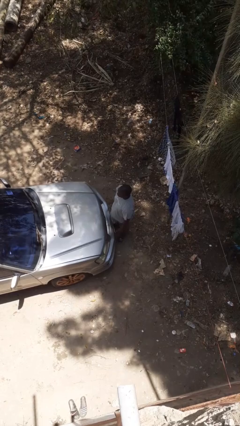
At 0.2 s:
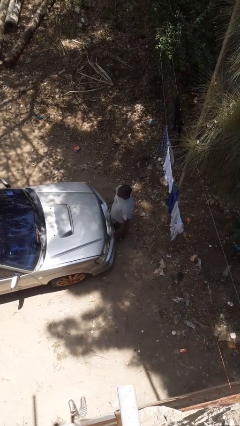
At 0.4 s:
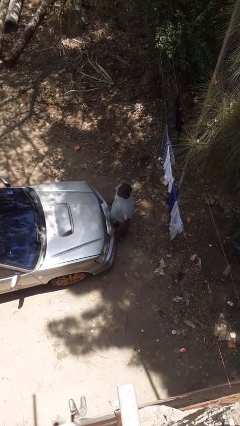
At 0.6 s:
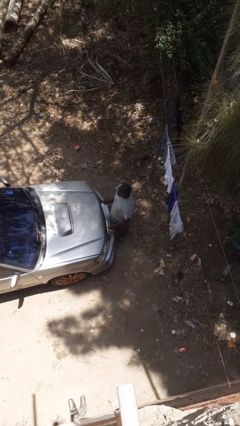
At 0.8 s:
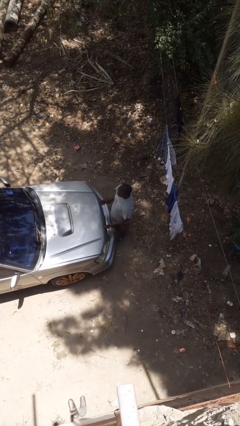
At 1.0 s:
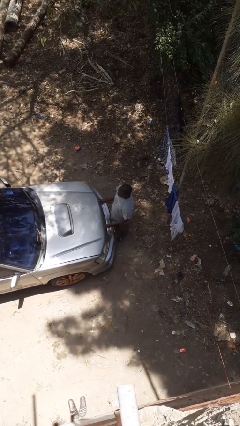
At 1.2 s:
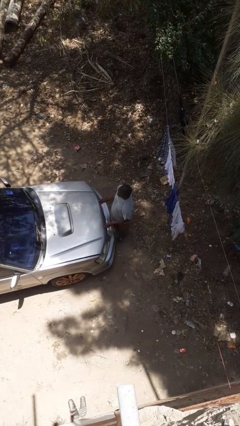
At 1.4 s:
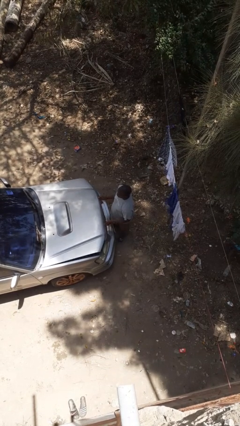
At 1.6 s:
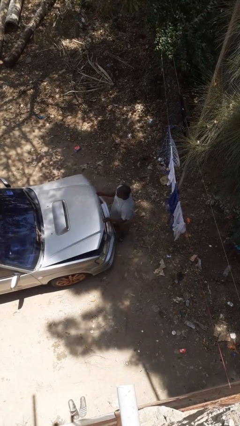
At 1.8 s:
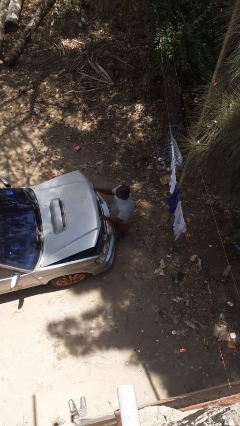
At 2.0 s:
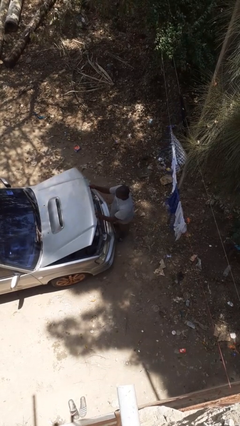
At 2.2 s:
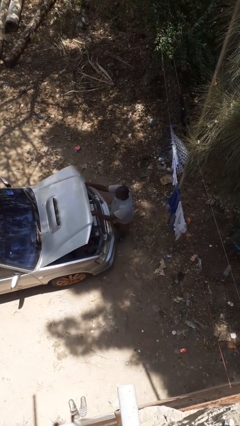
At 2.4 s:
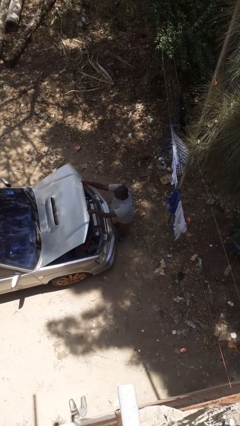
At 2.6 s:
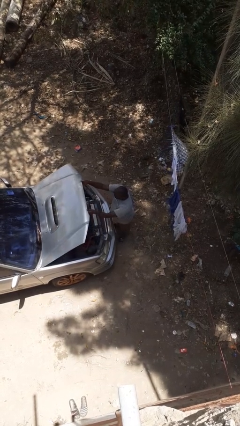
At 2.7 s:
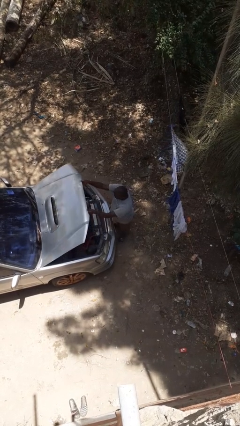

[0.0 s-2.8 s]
person opens car hood

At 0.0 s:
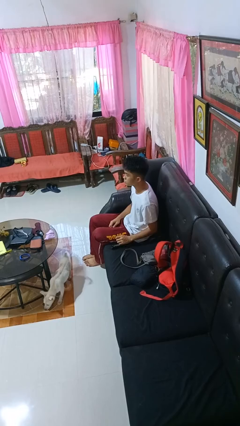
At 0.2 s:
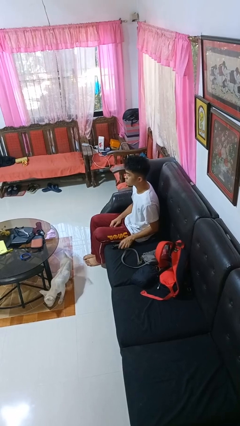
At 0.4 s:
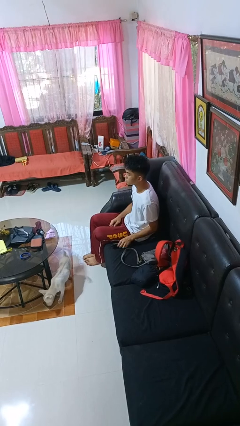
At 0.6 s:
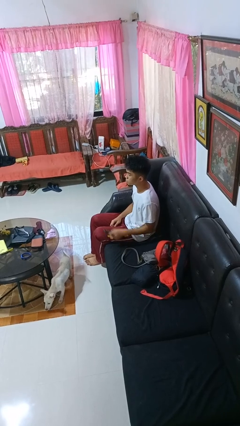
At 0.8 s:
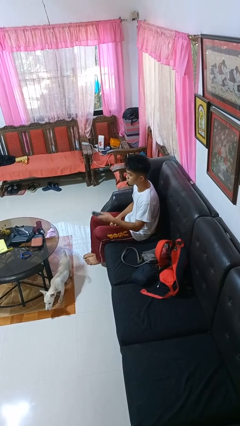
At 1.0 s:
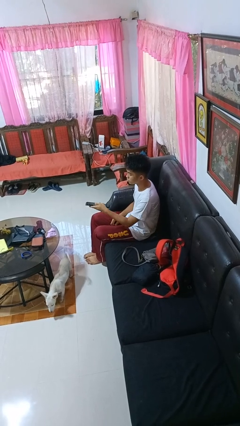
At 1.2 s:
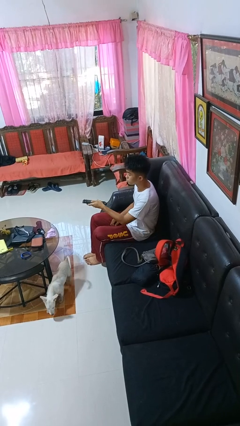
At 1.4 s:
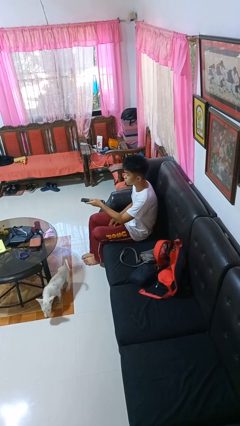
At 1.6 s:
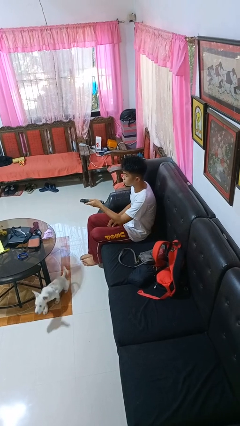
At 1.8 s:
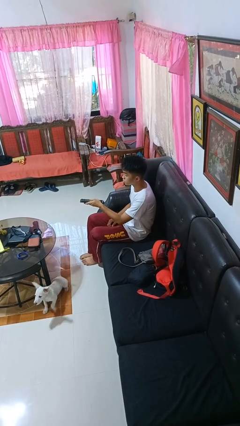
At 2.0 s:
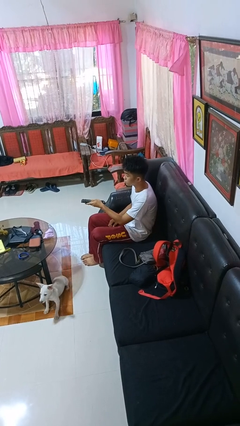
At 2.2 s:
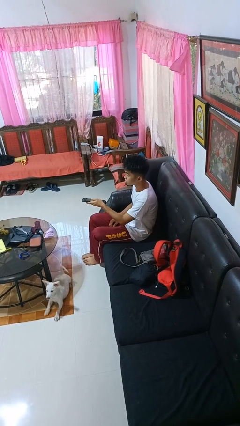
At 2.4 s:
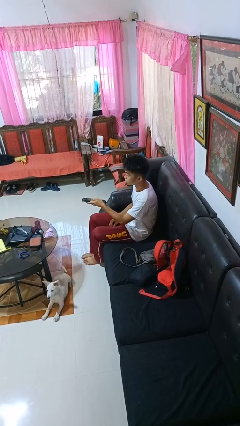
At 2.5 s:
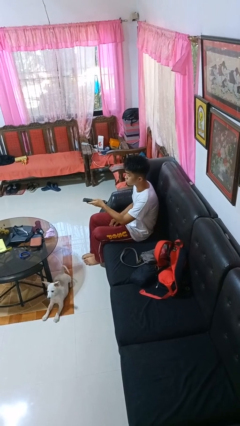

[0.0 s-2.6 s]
person picks up object from shelf

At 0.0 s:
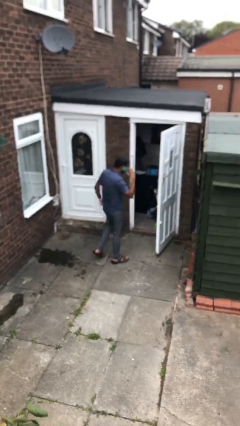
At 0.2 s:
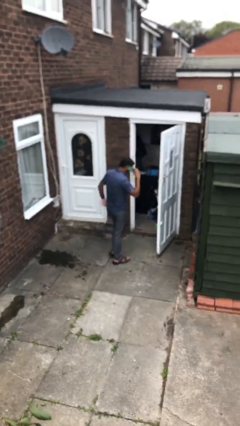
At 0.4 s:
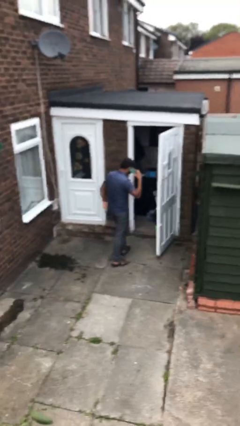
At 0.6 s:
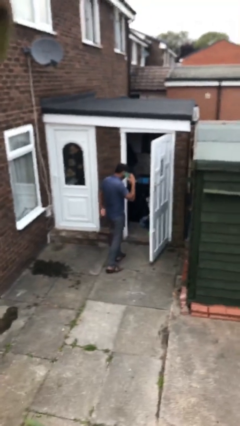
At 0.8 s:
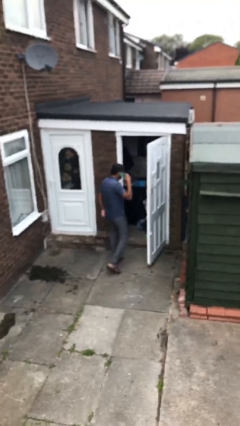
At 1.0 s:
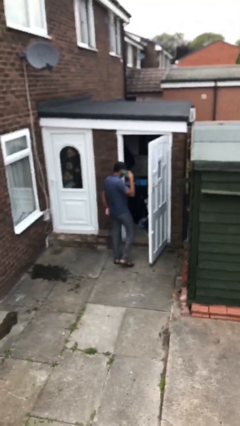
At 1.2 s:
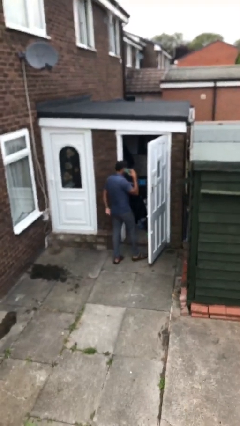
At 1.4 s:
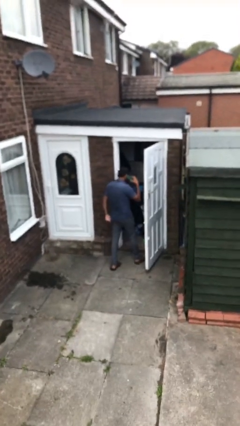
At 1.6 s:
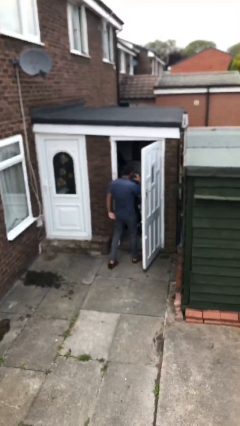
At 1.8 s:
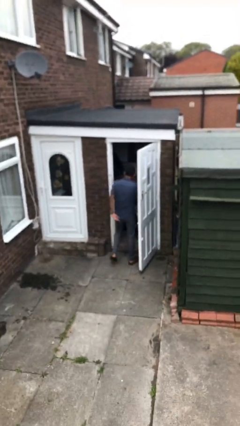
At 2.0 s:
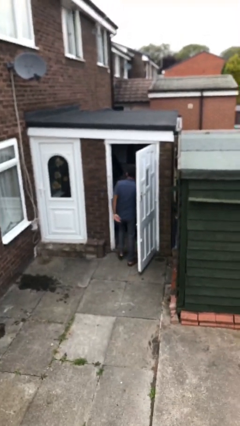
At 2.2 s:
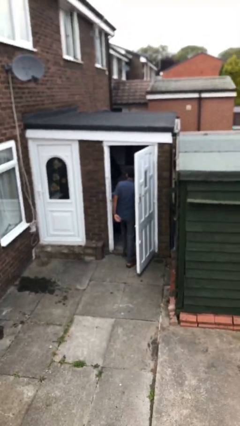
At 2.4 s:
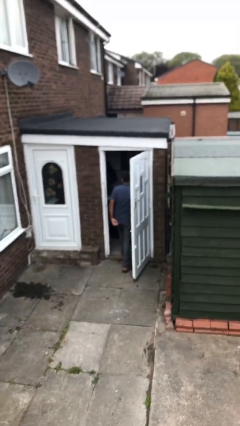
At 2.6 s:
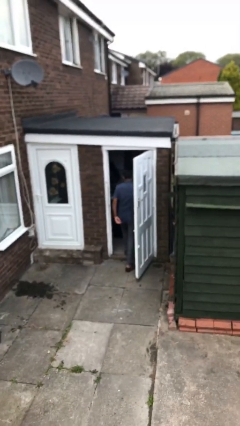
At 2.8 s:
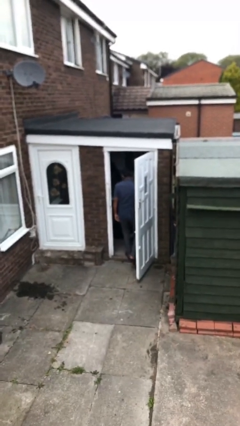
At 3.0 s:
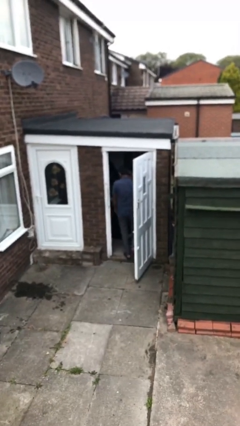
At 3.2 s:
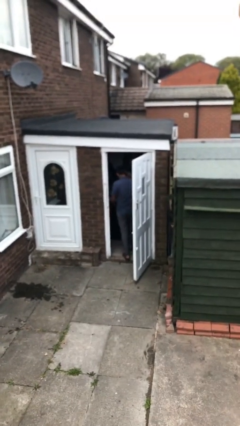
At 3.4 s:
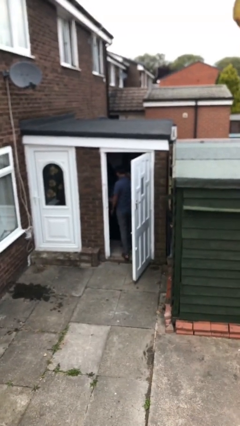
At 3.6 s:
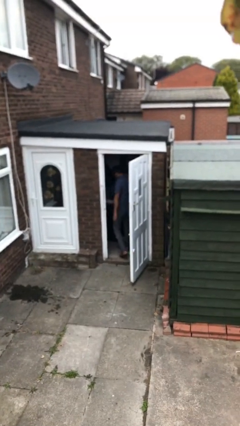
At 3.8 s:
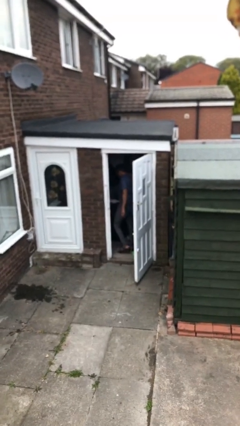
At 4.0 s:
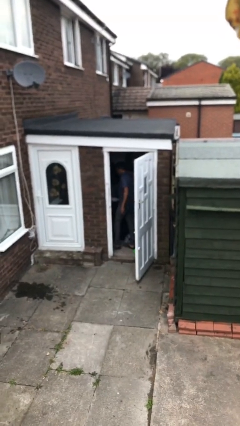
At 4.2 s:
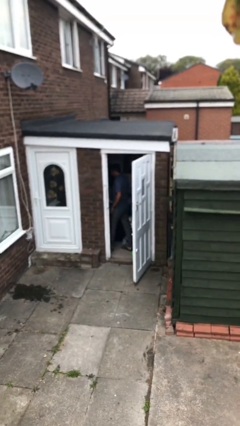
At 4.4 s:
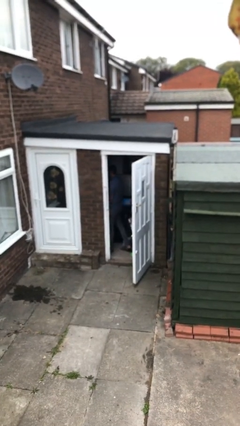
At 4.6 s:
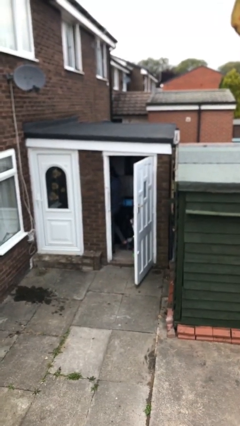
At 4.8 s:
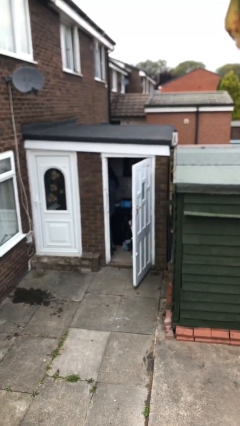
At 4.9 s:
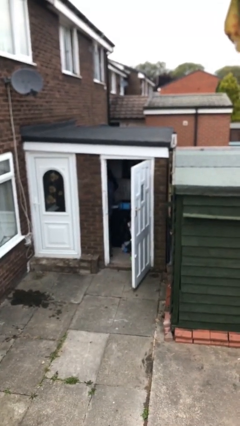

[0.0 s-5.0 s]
person exits scene through structure

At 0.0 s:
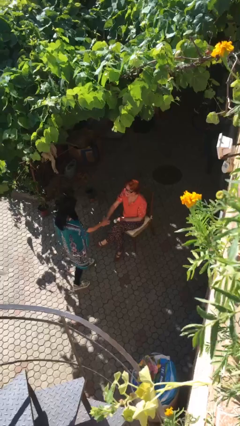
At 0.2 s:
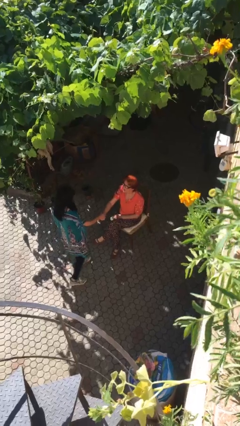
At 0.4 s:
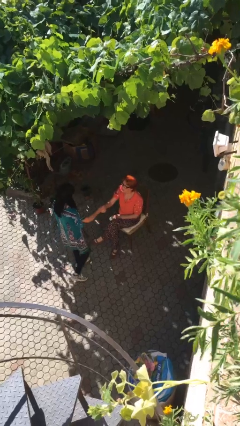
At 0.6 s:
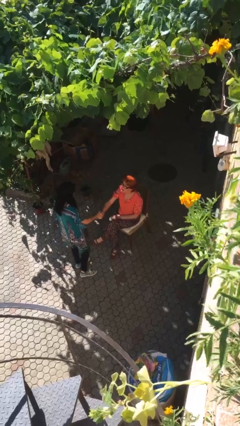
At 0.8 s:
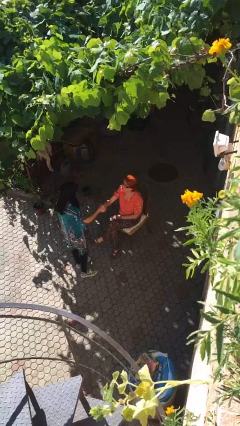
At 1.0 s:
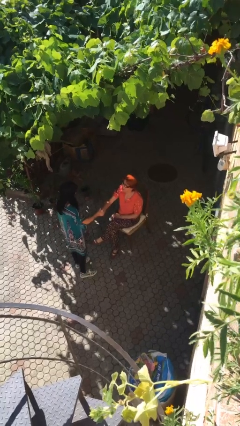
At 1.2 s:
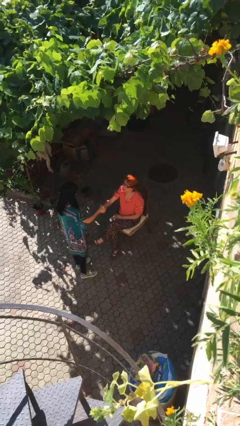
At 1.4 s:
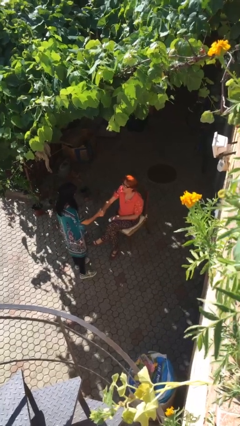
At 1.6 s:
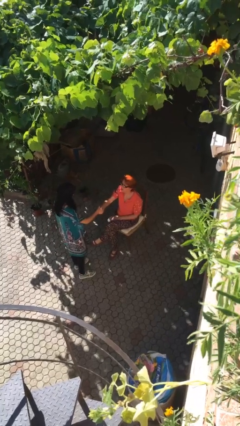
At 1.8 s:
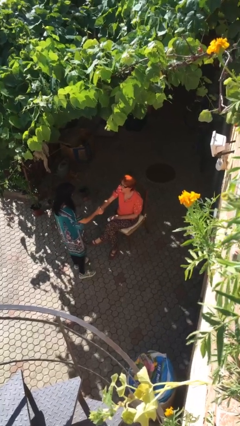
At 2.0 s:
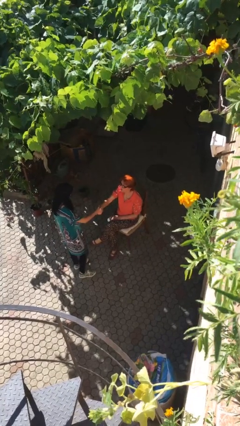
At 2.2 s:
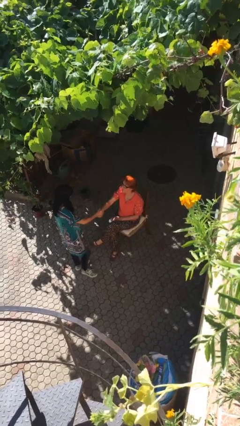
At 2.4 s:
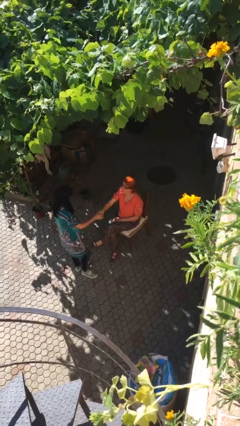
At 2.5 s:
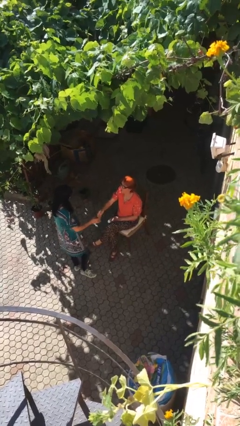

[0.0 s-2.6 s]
person shakes hand

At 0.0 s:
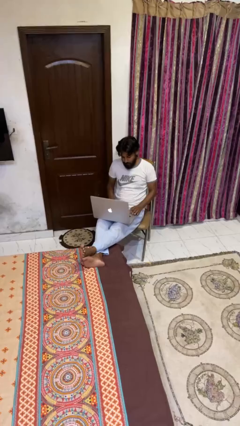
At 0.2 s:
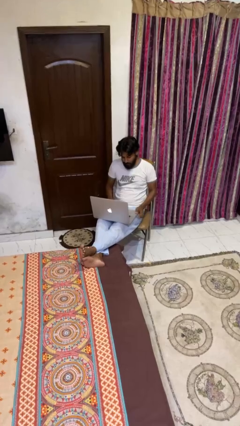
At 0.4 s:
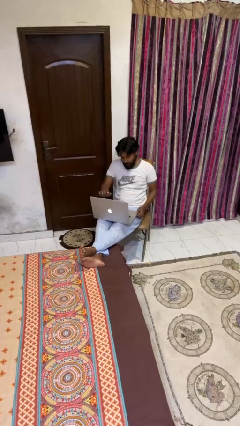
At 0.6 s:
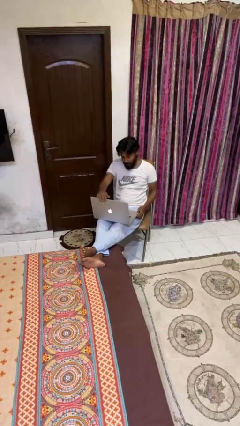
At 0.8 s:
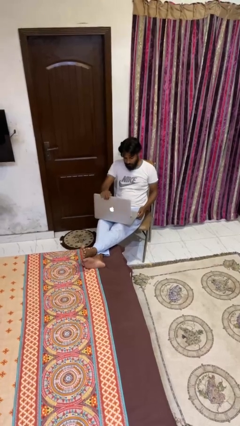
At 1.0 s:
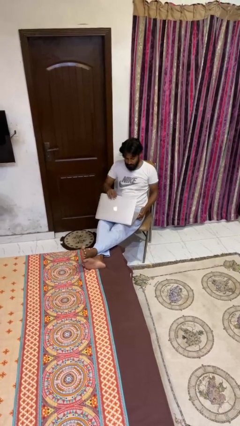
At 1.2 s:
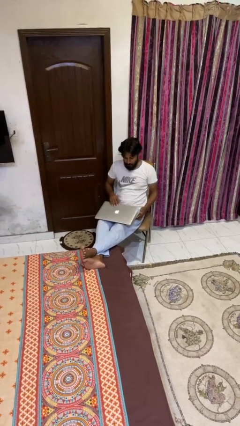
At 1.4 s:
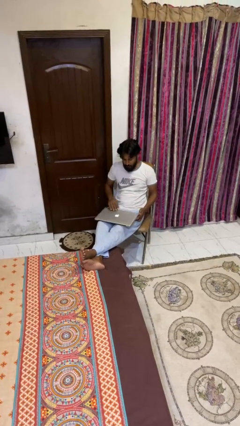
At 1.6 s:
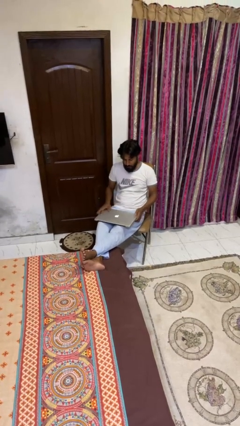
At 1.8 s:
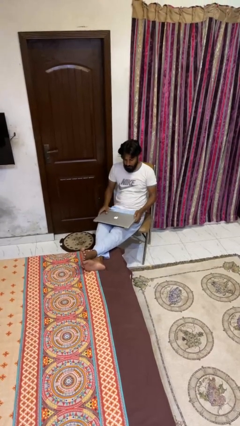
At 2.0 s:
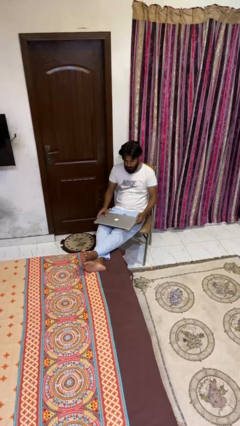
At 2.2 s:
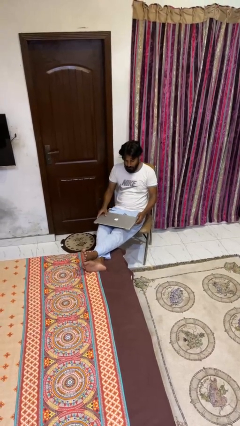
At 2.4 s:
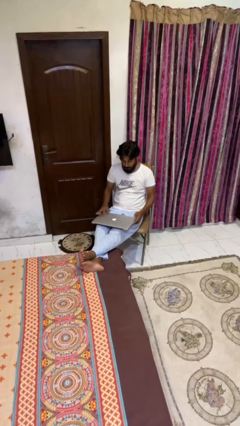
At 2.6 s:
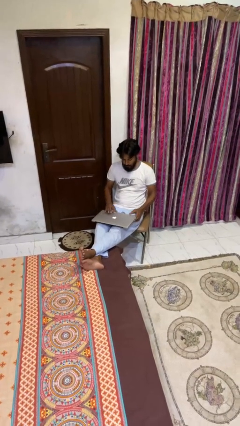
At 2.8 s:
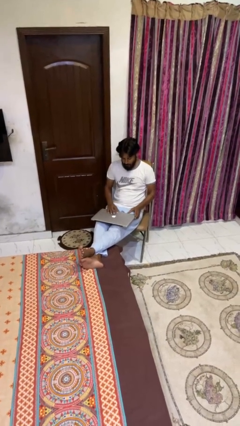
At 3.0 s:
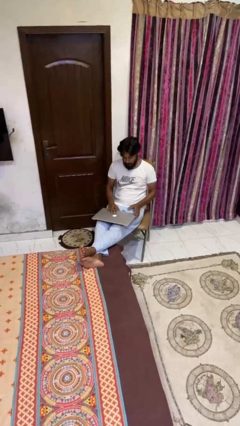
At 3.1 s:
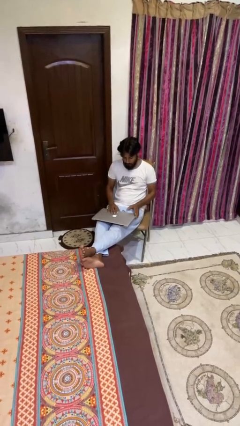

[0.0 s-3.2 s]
person closes laptop

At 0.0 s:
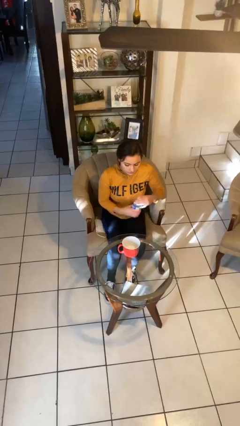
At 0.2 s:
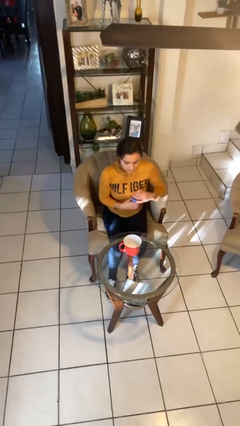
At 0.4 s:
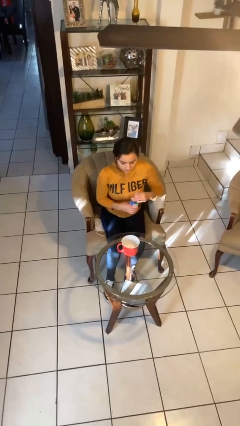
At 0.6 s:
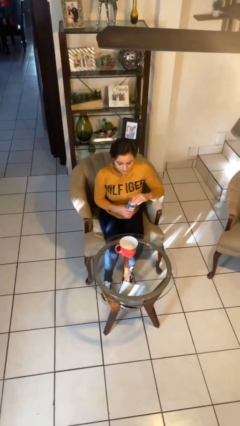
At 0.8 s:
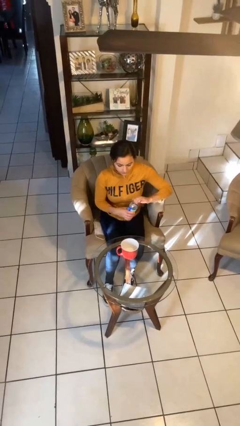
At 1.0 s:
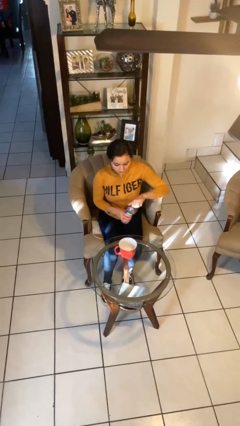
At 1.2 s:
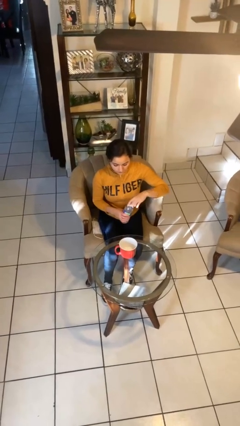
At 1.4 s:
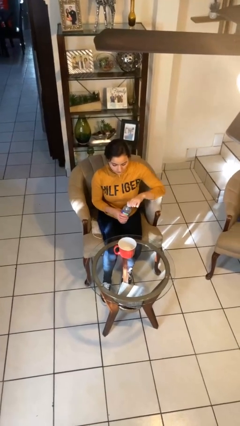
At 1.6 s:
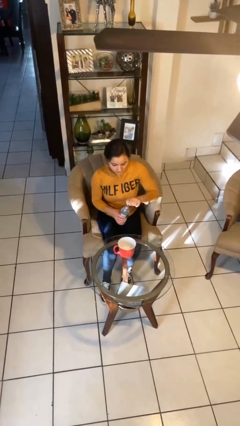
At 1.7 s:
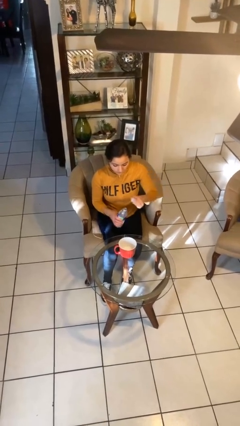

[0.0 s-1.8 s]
person unscrews lid from bottle
